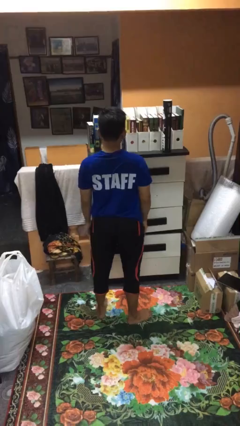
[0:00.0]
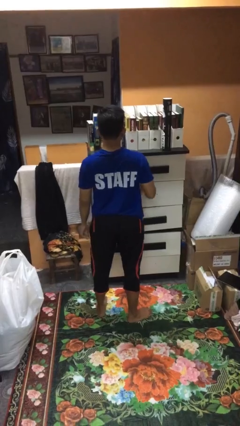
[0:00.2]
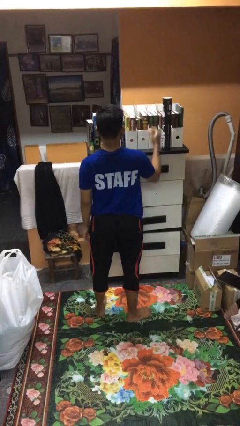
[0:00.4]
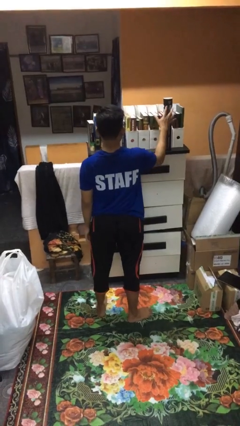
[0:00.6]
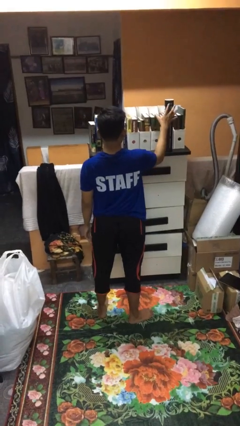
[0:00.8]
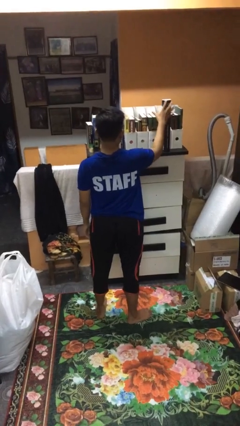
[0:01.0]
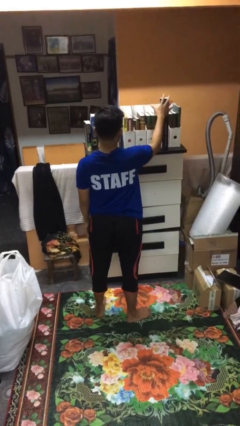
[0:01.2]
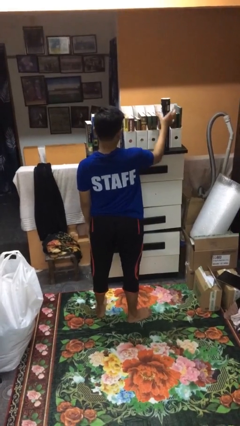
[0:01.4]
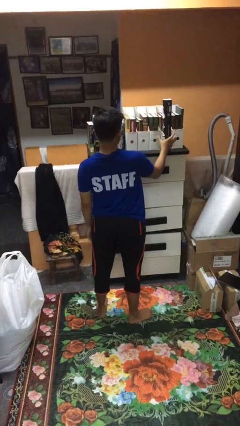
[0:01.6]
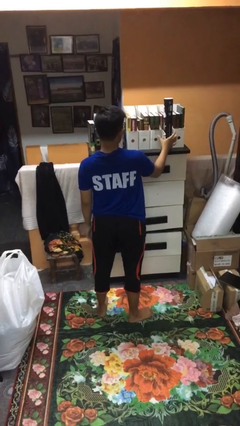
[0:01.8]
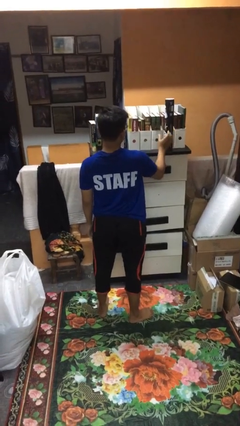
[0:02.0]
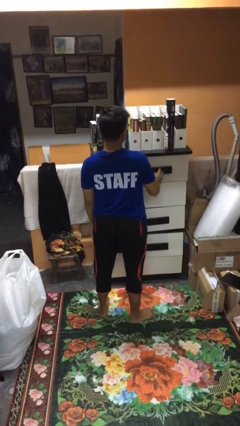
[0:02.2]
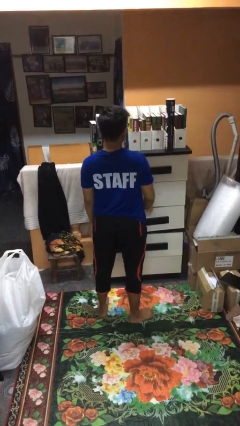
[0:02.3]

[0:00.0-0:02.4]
person waves hand over object

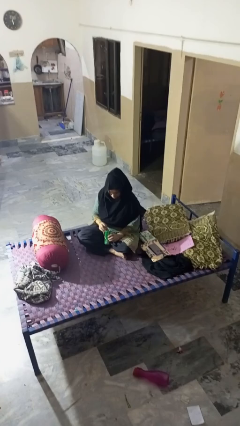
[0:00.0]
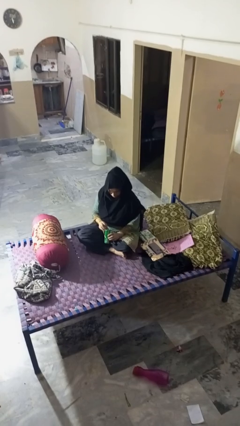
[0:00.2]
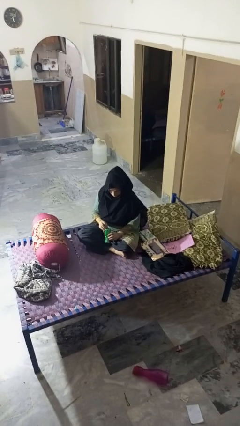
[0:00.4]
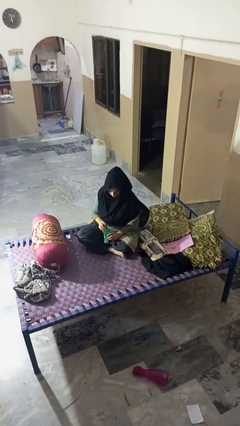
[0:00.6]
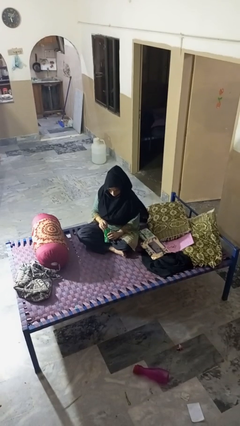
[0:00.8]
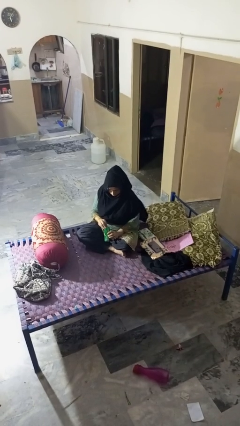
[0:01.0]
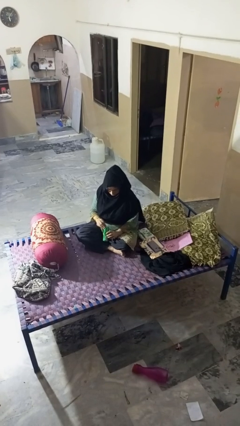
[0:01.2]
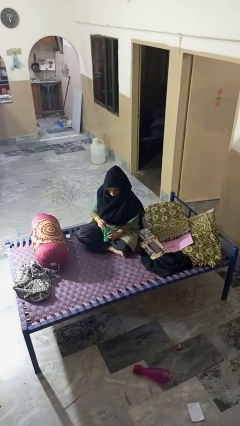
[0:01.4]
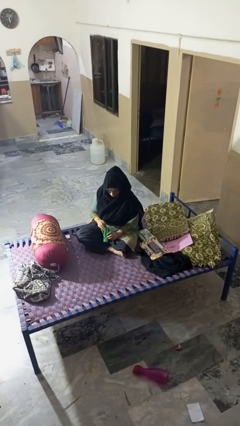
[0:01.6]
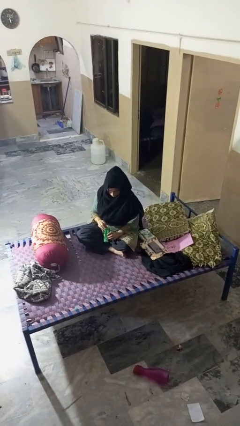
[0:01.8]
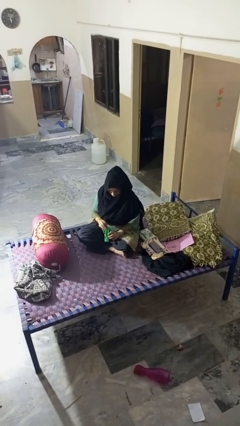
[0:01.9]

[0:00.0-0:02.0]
person opens can with can opener

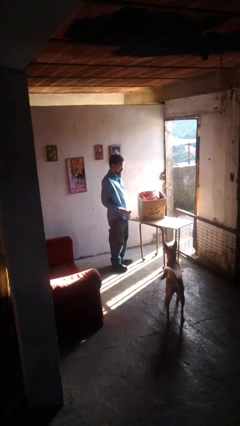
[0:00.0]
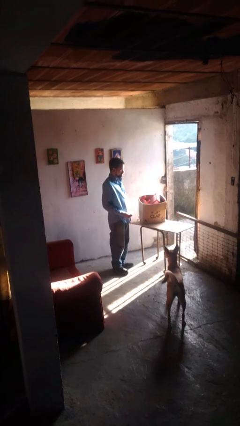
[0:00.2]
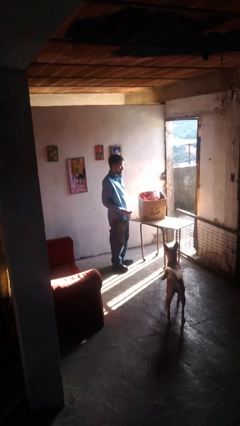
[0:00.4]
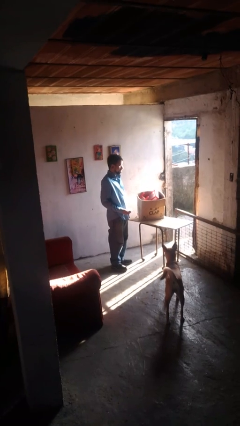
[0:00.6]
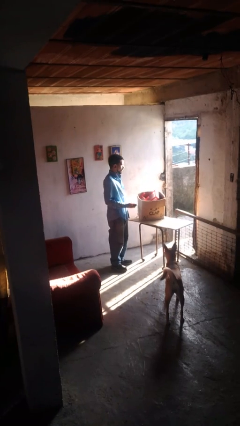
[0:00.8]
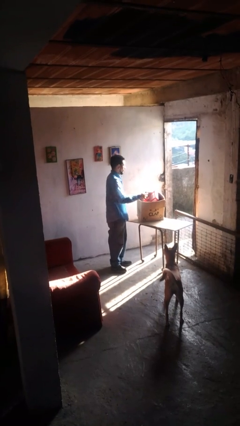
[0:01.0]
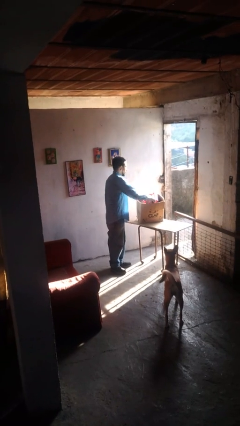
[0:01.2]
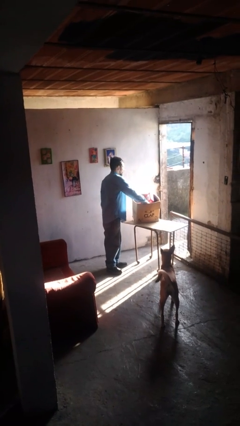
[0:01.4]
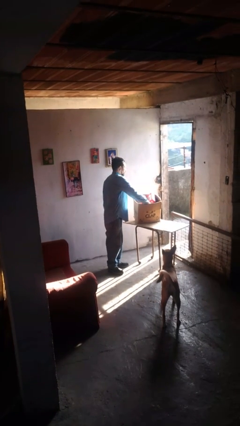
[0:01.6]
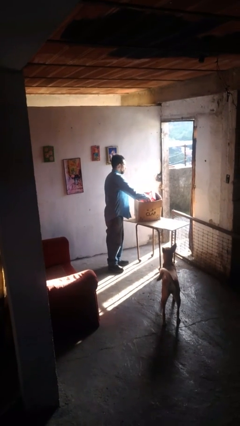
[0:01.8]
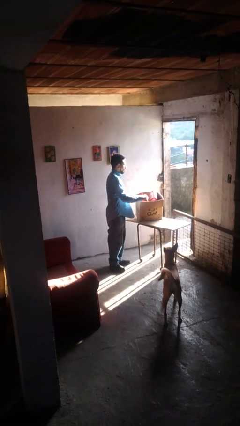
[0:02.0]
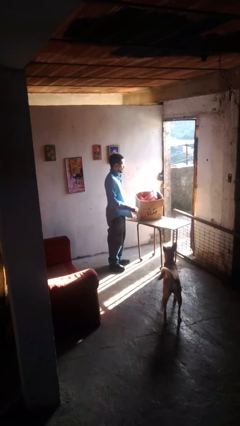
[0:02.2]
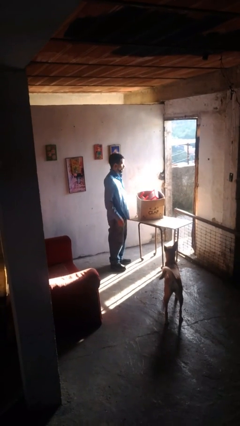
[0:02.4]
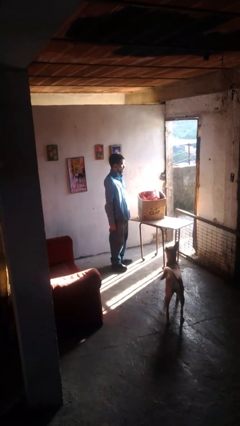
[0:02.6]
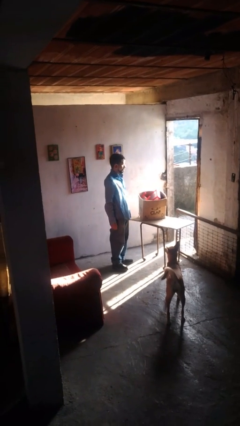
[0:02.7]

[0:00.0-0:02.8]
person puts object into box

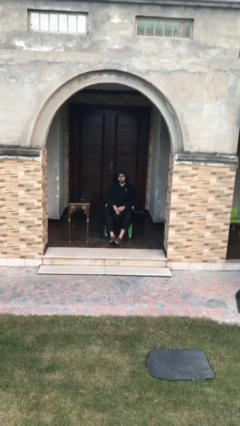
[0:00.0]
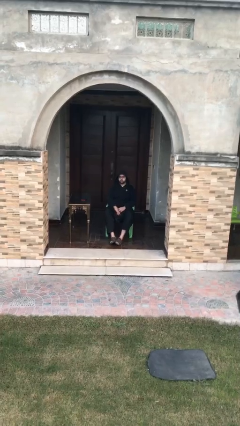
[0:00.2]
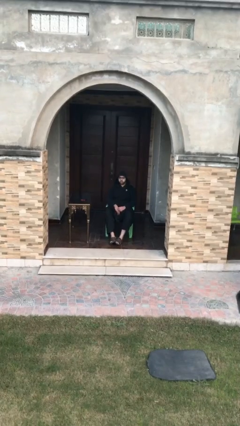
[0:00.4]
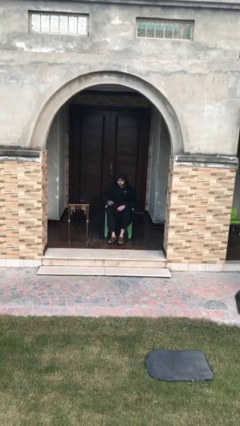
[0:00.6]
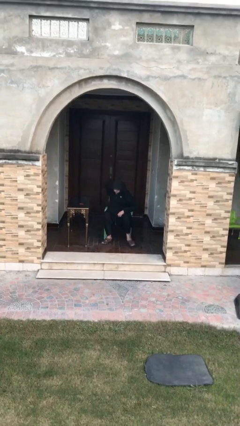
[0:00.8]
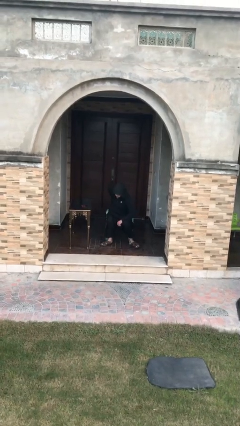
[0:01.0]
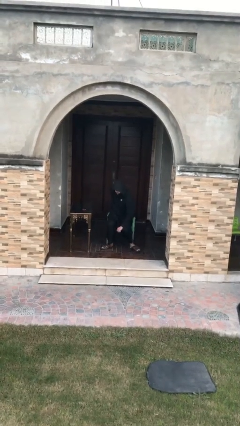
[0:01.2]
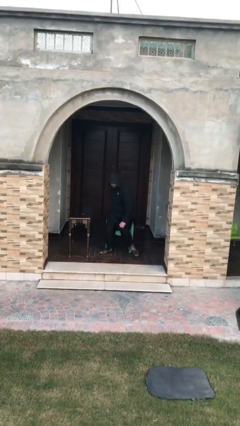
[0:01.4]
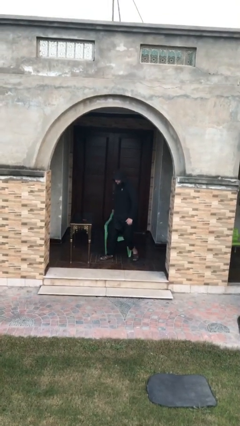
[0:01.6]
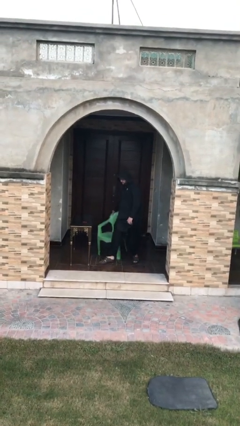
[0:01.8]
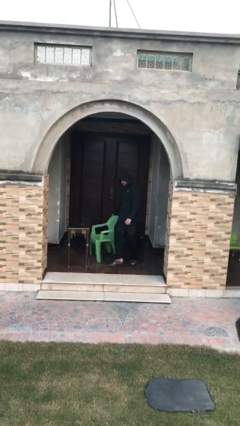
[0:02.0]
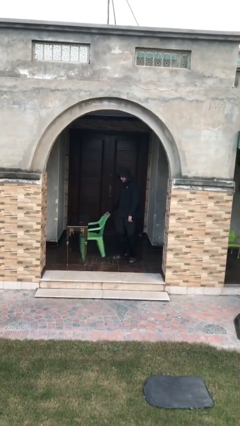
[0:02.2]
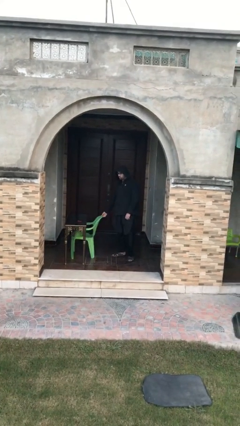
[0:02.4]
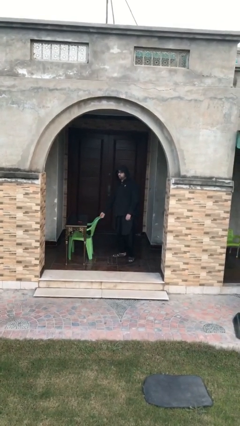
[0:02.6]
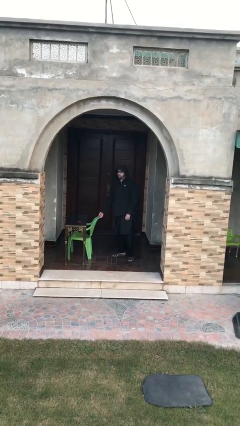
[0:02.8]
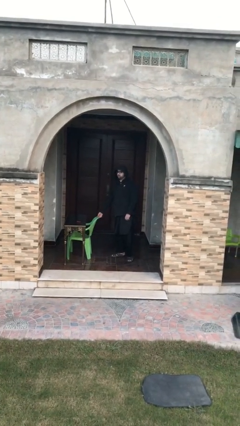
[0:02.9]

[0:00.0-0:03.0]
person stands up

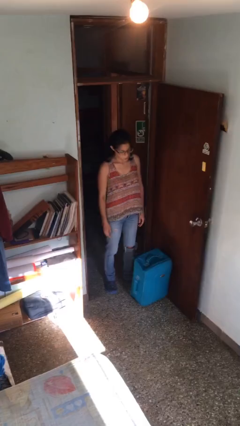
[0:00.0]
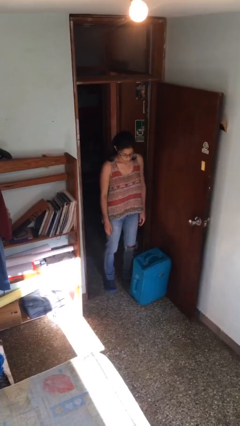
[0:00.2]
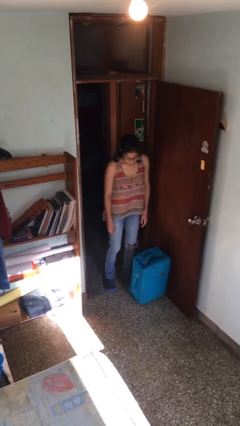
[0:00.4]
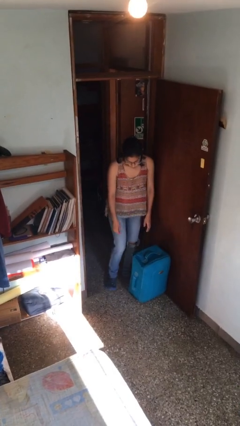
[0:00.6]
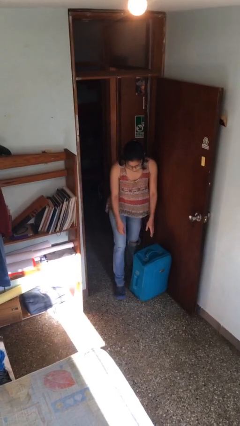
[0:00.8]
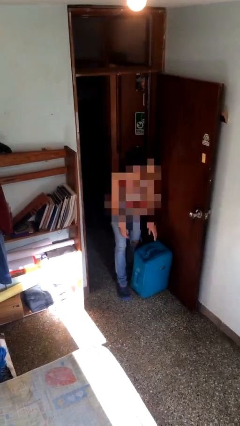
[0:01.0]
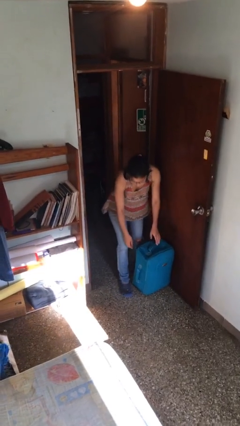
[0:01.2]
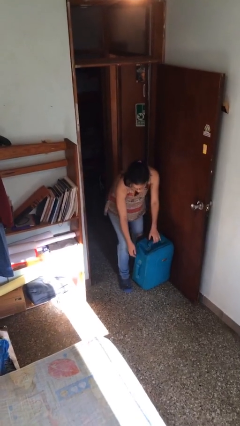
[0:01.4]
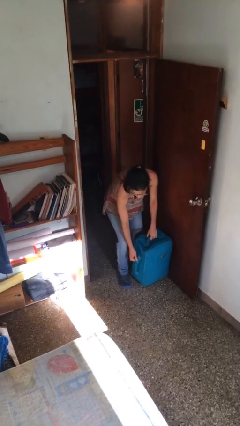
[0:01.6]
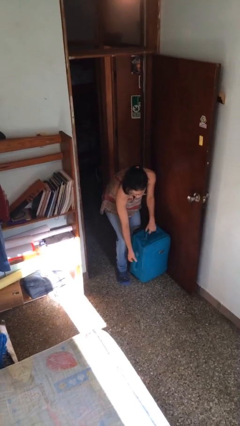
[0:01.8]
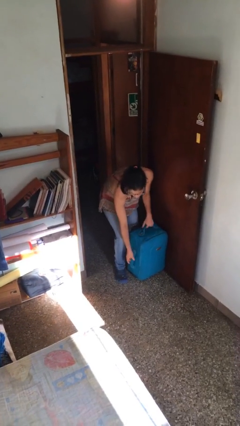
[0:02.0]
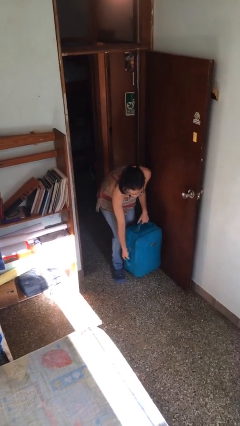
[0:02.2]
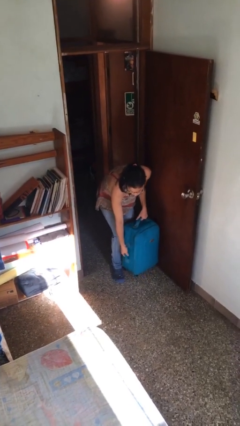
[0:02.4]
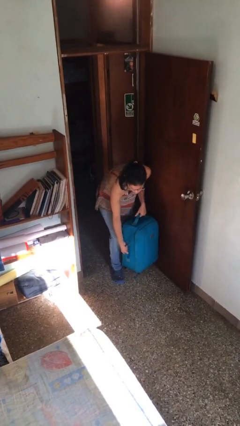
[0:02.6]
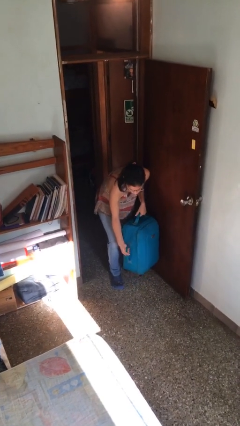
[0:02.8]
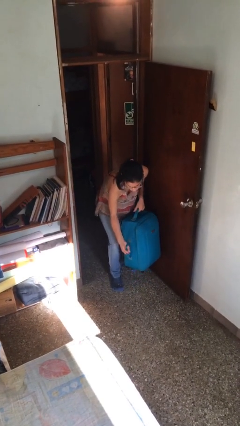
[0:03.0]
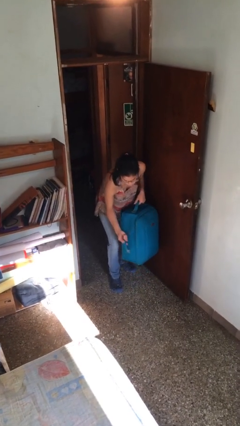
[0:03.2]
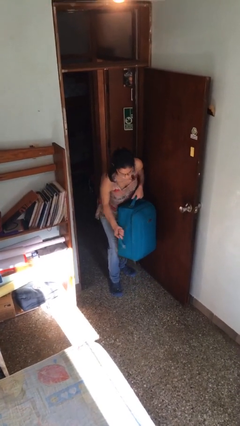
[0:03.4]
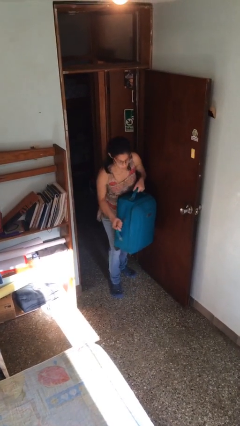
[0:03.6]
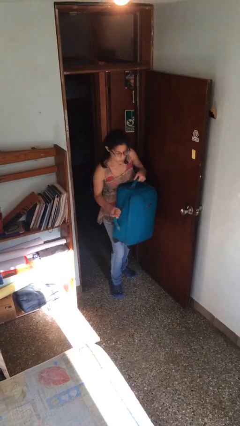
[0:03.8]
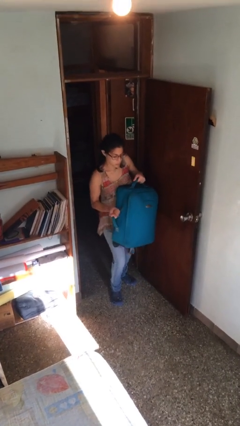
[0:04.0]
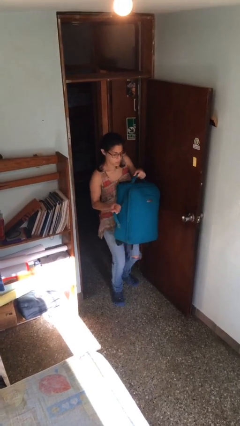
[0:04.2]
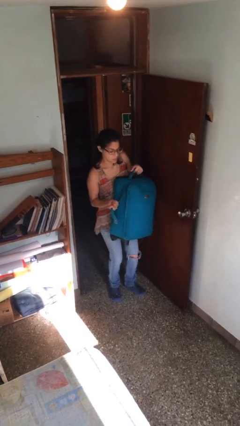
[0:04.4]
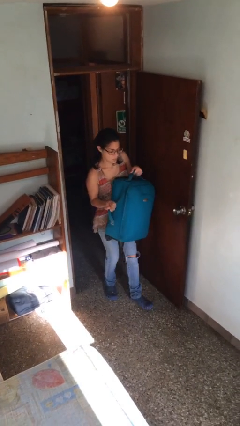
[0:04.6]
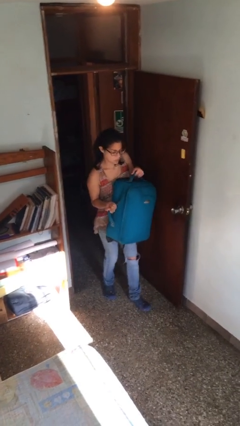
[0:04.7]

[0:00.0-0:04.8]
person picks up object from floor

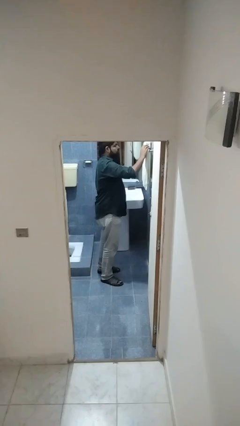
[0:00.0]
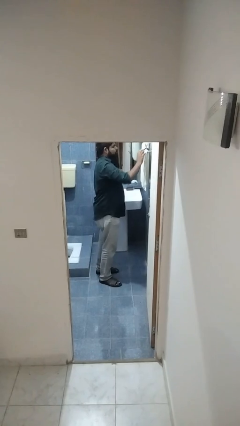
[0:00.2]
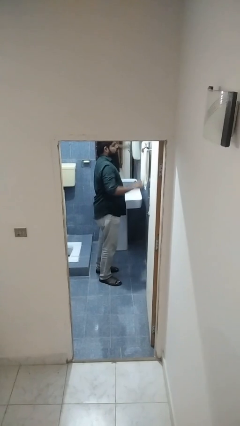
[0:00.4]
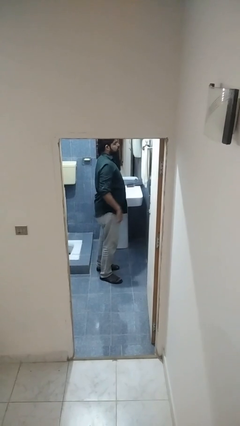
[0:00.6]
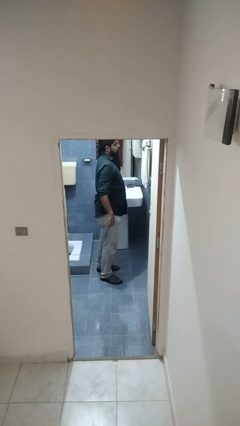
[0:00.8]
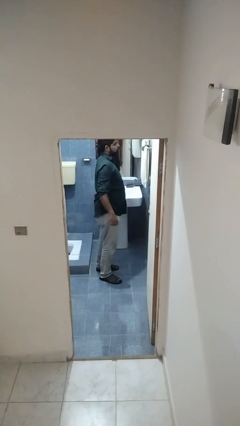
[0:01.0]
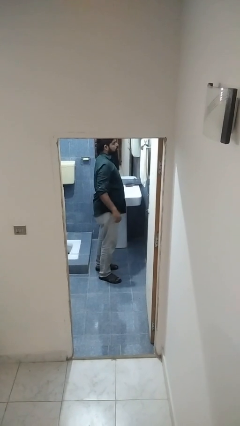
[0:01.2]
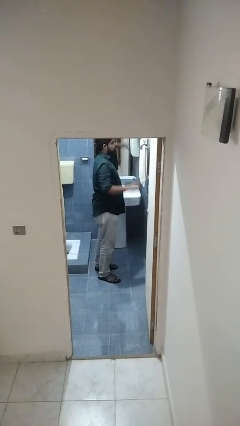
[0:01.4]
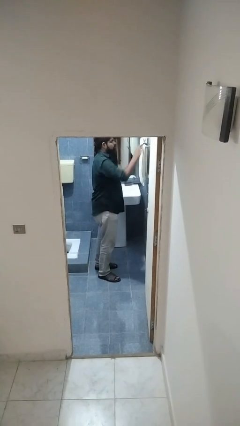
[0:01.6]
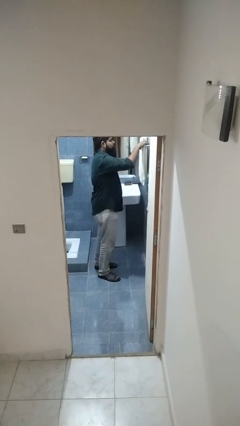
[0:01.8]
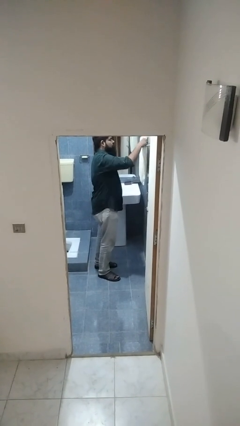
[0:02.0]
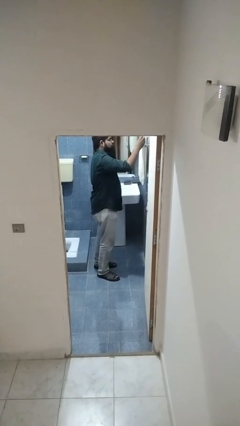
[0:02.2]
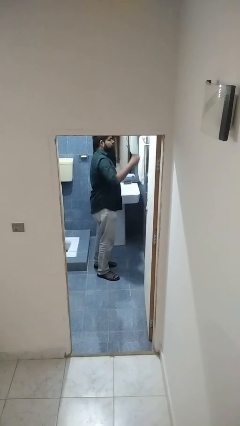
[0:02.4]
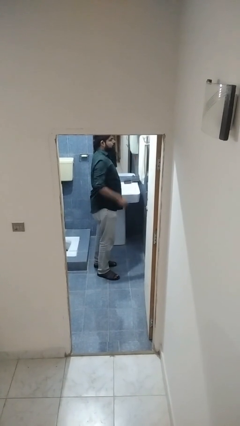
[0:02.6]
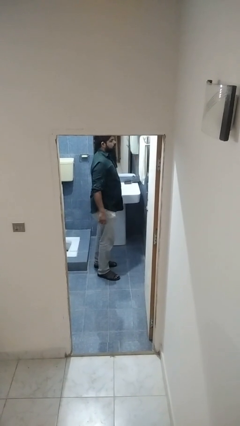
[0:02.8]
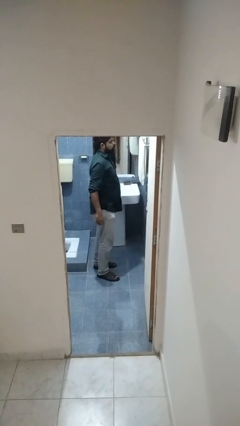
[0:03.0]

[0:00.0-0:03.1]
person picks up object from countertop
